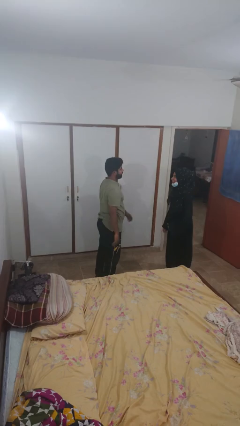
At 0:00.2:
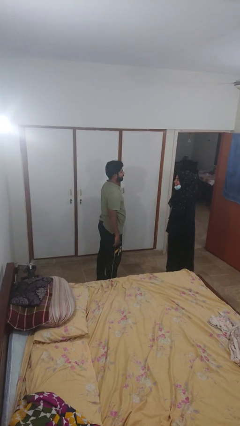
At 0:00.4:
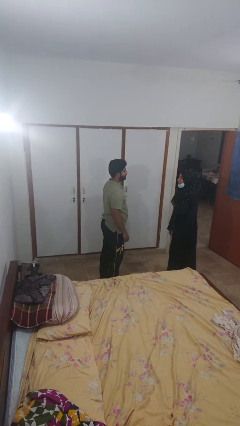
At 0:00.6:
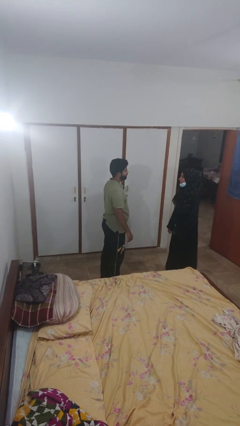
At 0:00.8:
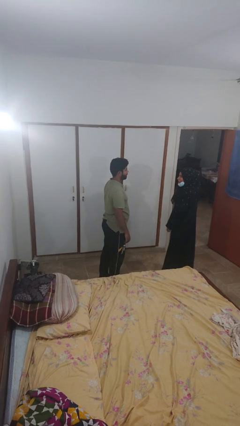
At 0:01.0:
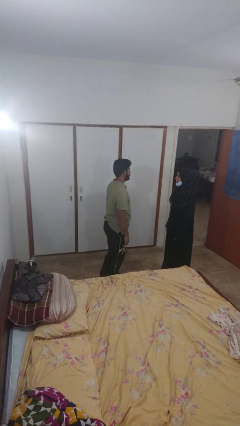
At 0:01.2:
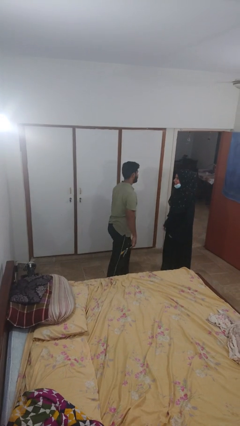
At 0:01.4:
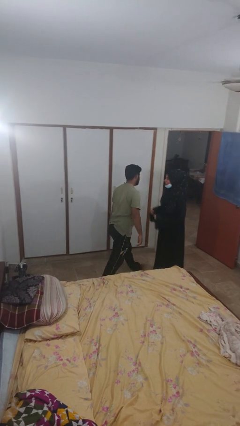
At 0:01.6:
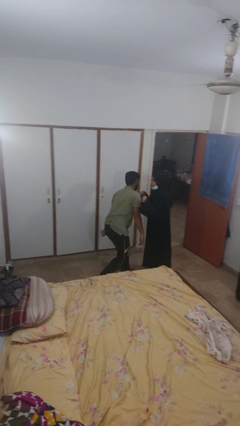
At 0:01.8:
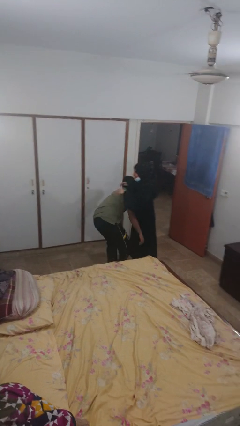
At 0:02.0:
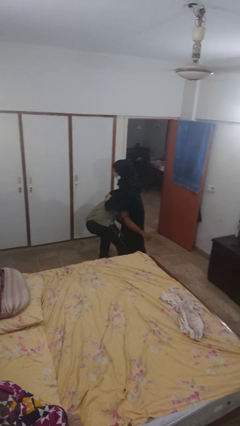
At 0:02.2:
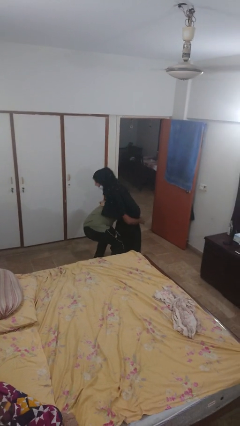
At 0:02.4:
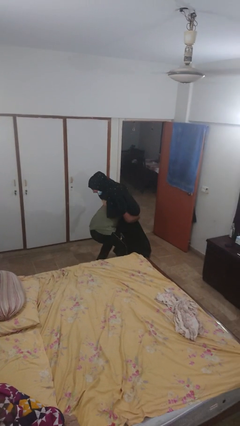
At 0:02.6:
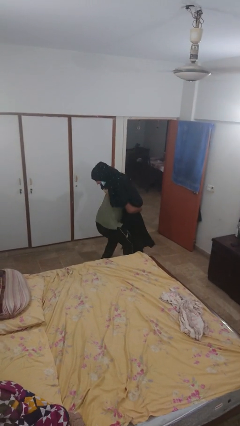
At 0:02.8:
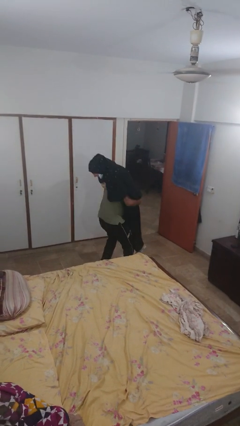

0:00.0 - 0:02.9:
person carries person over shoulder

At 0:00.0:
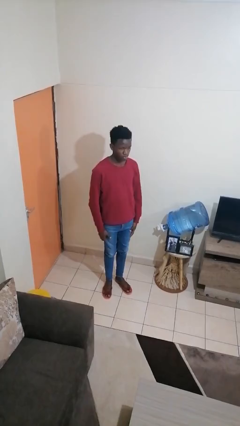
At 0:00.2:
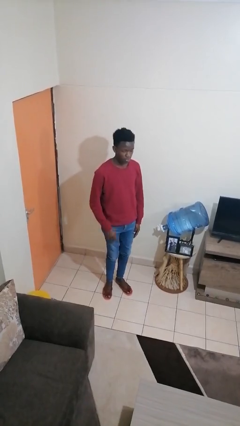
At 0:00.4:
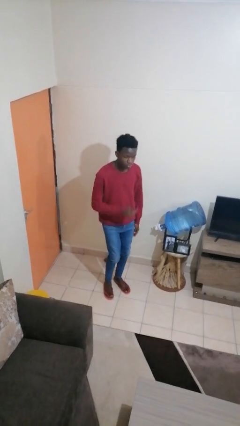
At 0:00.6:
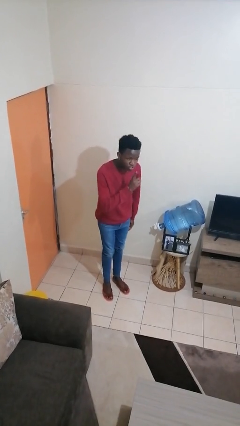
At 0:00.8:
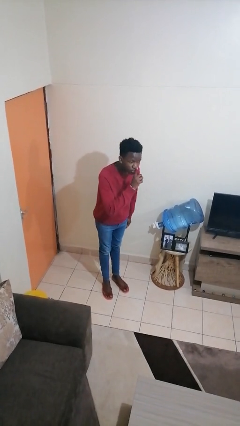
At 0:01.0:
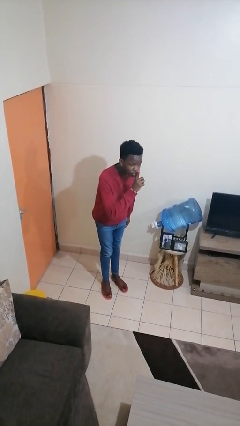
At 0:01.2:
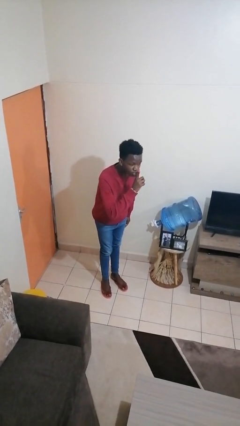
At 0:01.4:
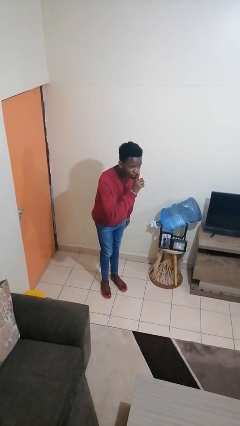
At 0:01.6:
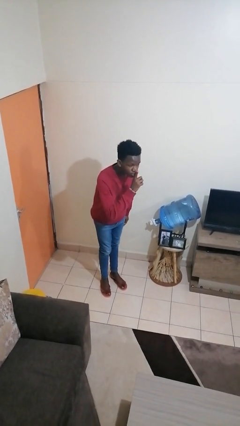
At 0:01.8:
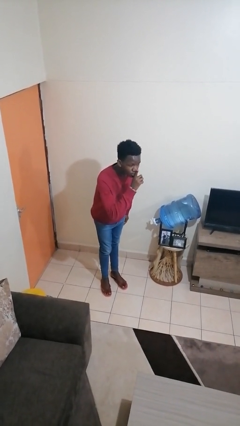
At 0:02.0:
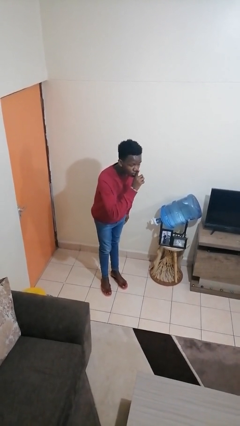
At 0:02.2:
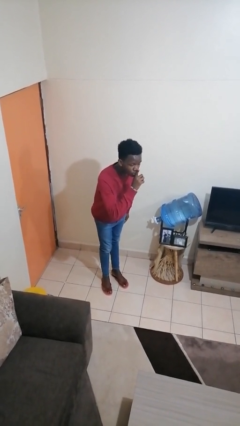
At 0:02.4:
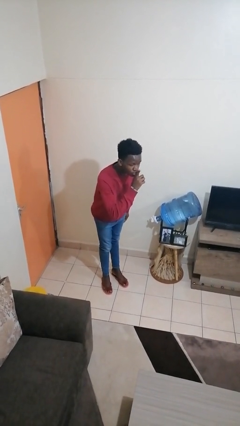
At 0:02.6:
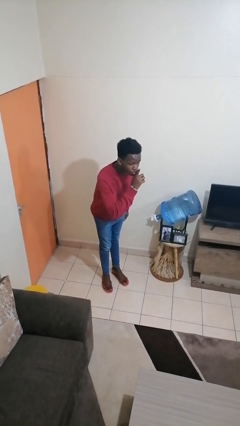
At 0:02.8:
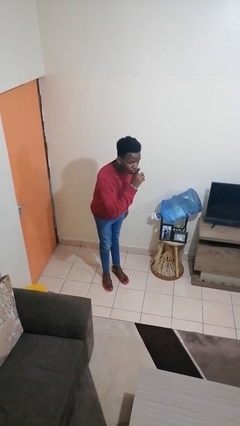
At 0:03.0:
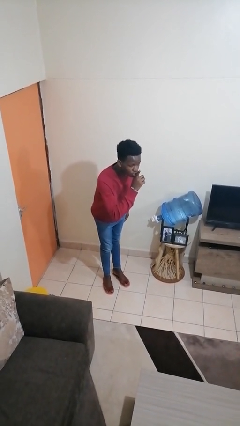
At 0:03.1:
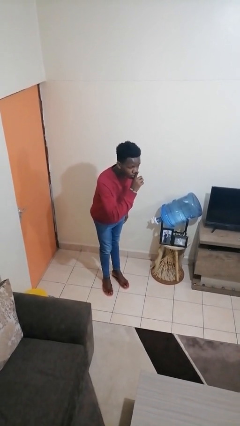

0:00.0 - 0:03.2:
person gestures be quiet

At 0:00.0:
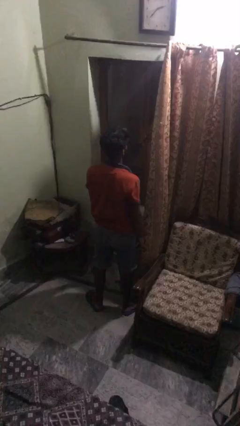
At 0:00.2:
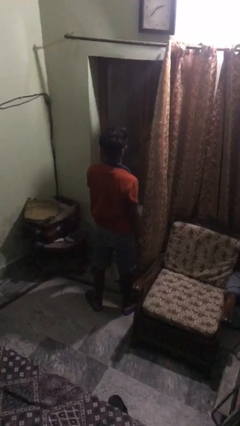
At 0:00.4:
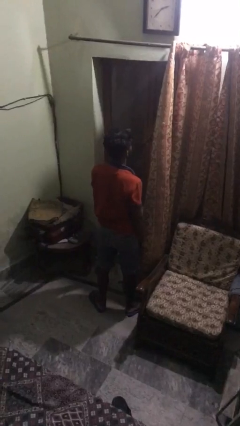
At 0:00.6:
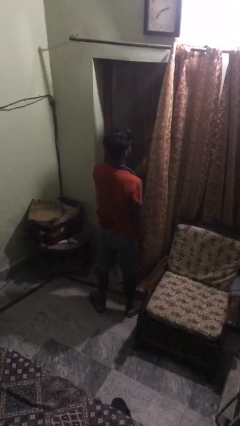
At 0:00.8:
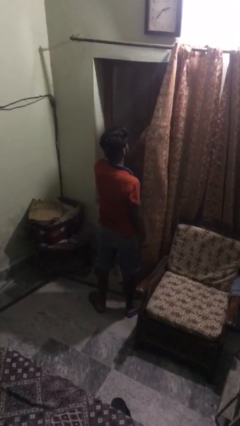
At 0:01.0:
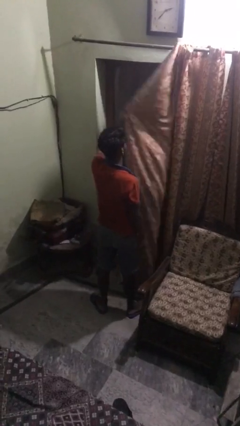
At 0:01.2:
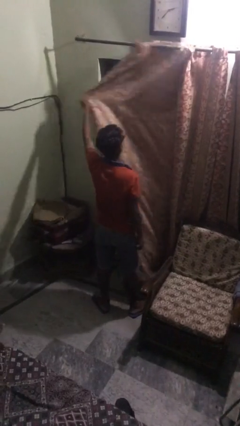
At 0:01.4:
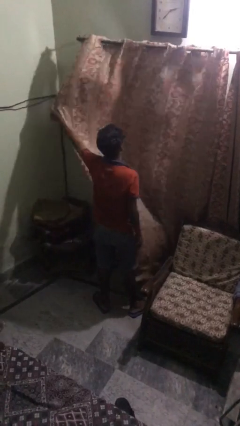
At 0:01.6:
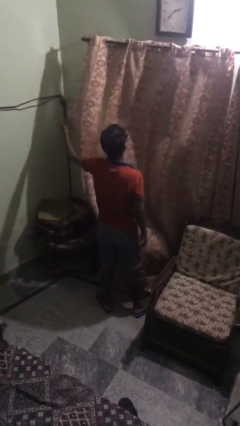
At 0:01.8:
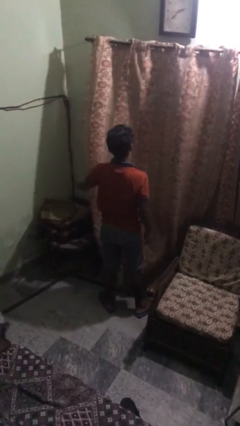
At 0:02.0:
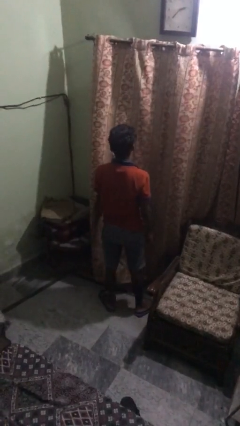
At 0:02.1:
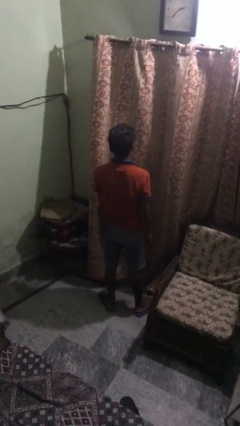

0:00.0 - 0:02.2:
person closes curtains

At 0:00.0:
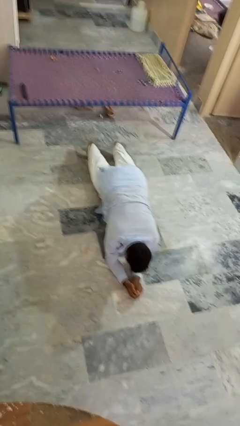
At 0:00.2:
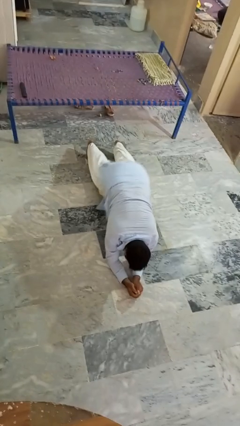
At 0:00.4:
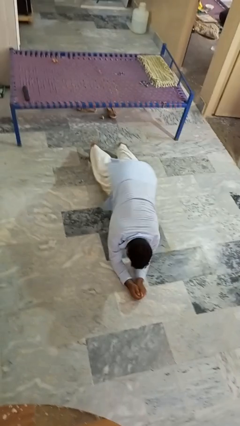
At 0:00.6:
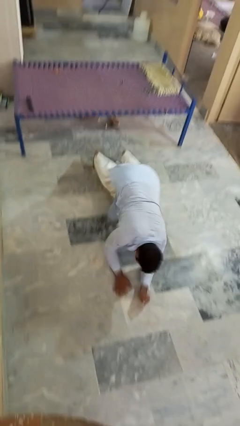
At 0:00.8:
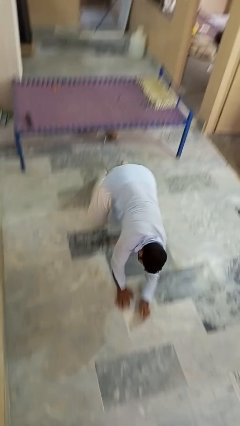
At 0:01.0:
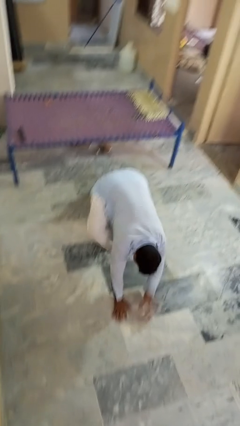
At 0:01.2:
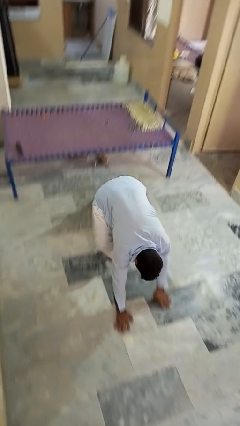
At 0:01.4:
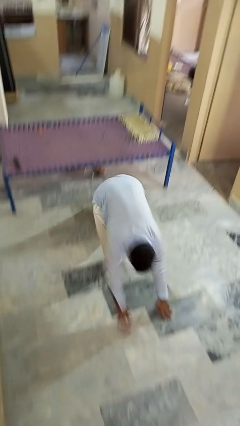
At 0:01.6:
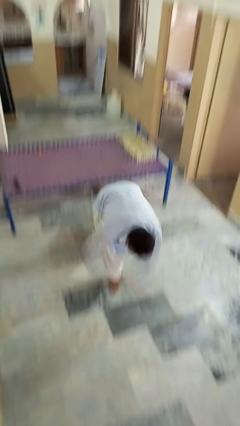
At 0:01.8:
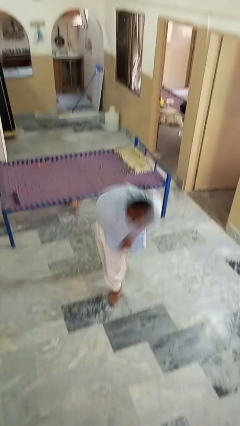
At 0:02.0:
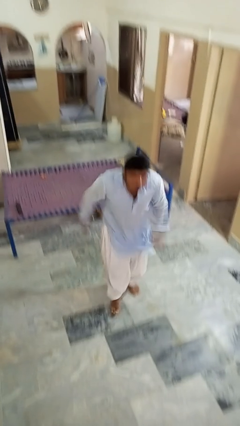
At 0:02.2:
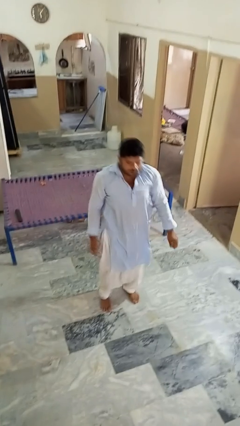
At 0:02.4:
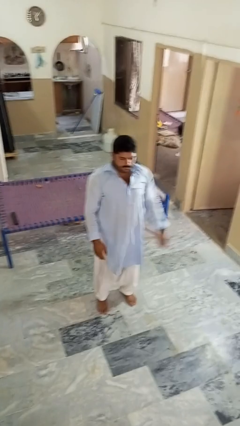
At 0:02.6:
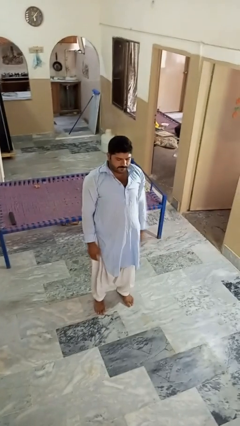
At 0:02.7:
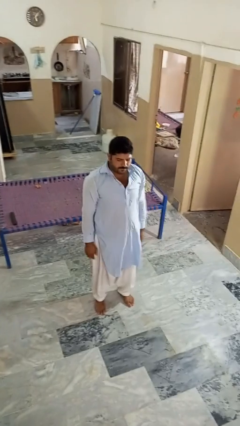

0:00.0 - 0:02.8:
person stands up from floor

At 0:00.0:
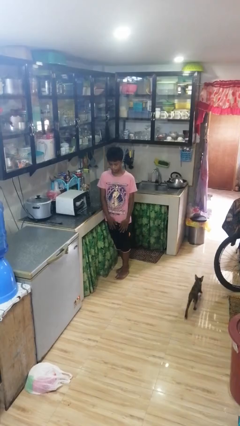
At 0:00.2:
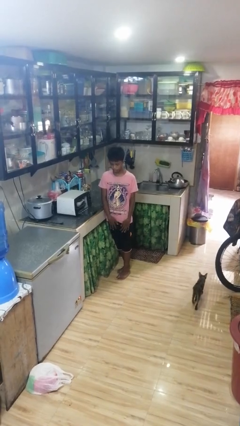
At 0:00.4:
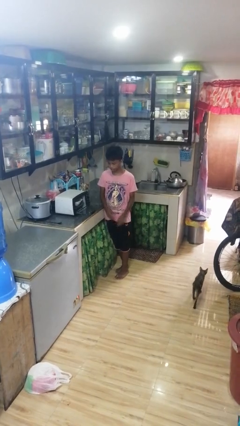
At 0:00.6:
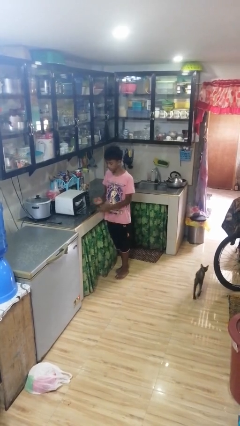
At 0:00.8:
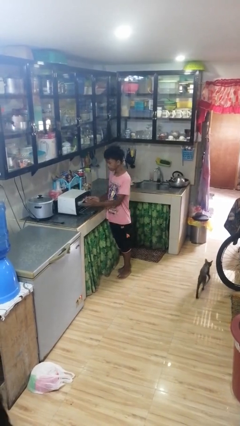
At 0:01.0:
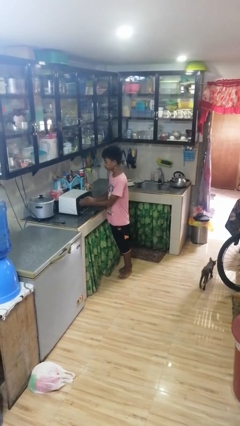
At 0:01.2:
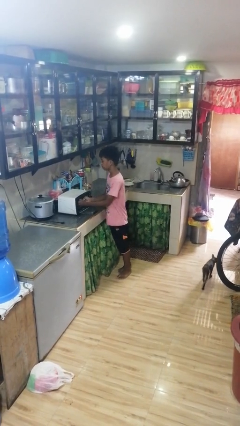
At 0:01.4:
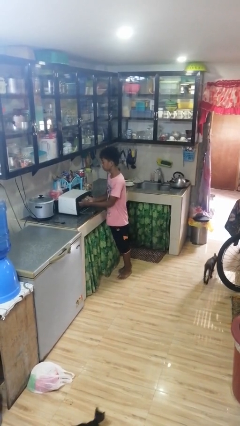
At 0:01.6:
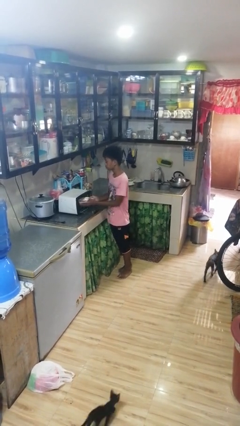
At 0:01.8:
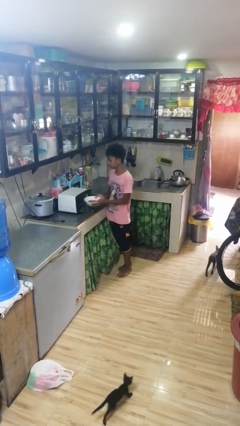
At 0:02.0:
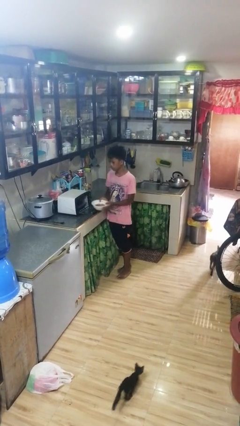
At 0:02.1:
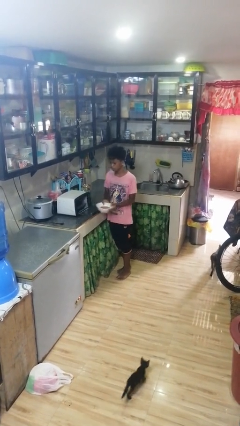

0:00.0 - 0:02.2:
person takes object from microwave

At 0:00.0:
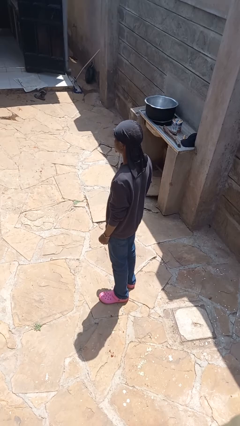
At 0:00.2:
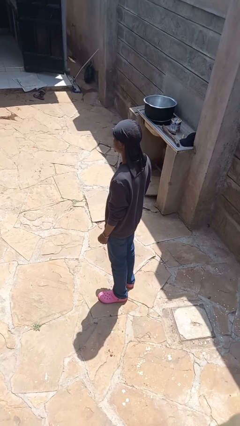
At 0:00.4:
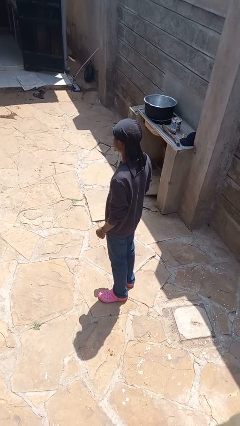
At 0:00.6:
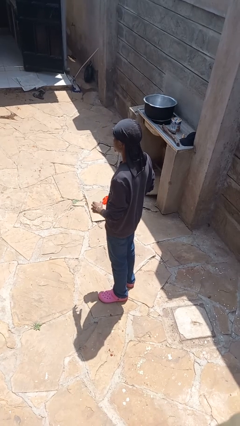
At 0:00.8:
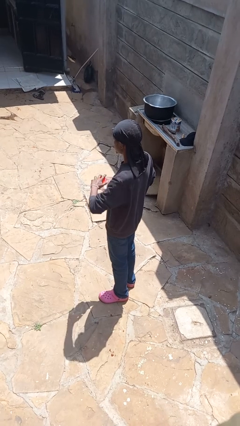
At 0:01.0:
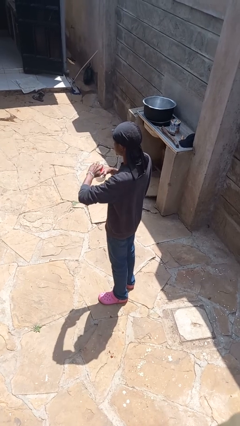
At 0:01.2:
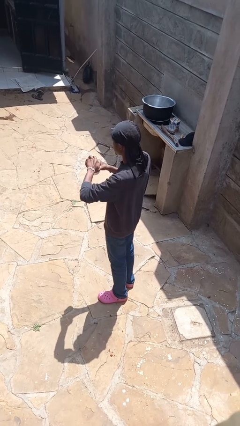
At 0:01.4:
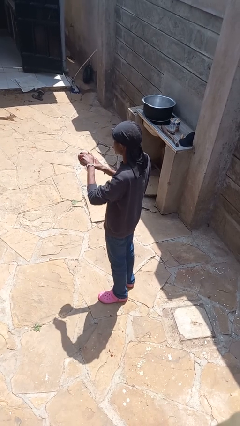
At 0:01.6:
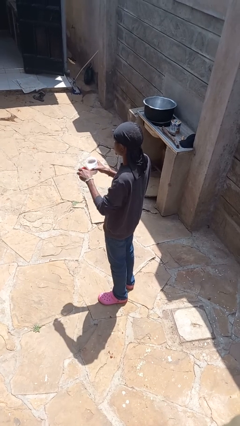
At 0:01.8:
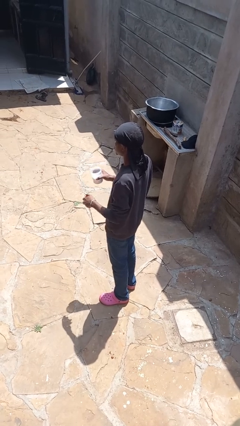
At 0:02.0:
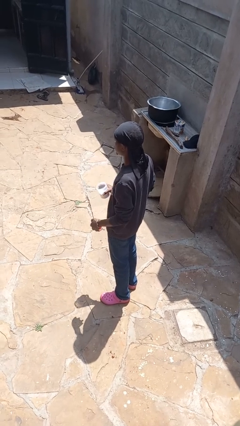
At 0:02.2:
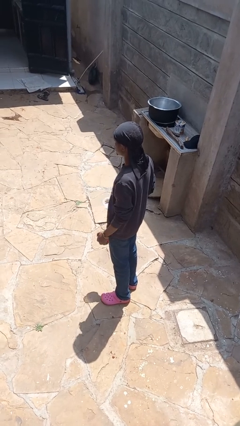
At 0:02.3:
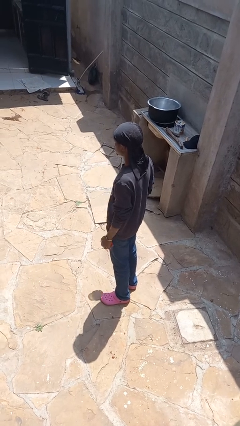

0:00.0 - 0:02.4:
person opens jar

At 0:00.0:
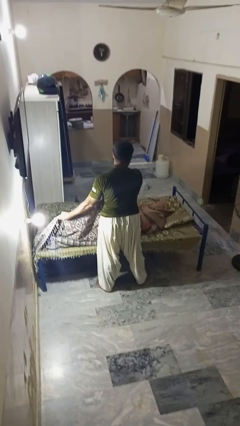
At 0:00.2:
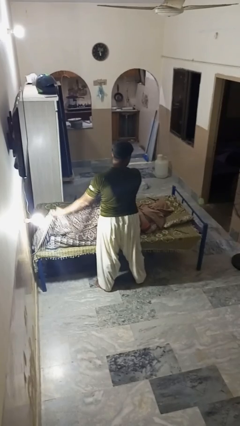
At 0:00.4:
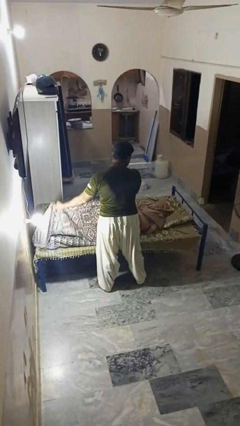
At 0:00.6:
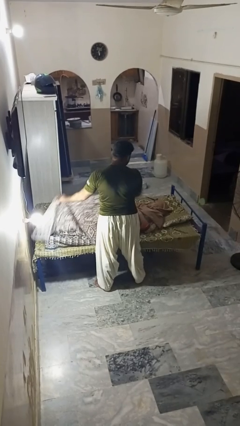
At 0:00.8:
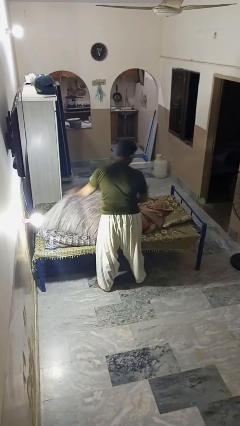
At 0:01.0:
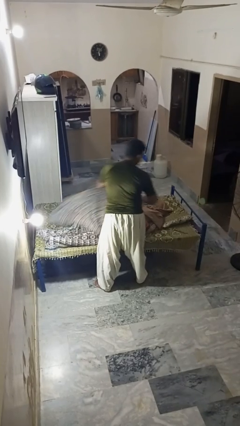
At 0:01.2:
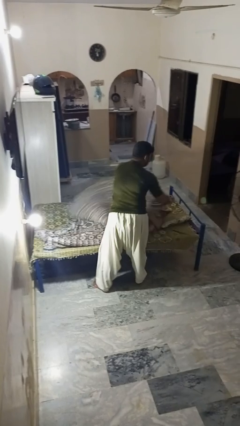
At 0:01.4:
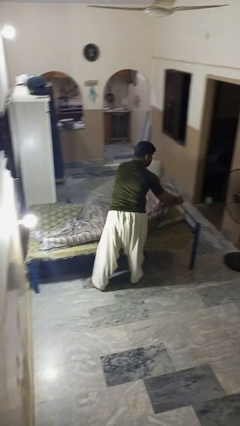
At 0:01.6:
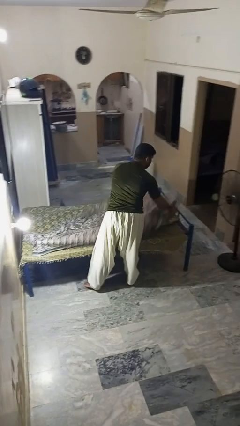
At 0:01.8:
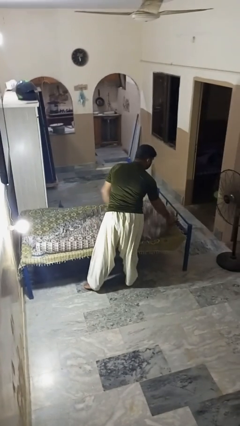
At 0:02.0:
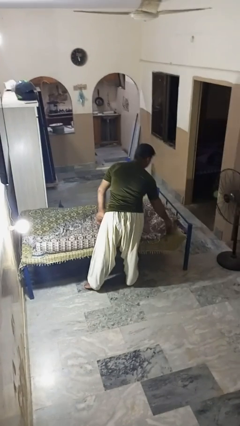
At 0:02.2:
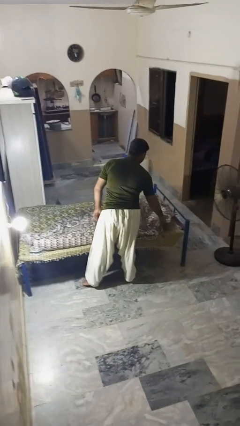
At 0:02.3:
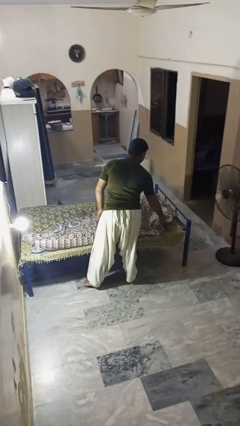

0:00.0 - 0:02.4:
person covers friend with blanket
